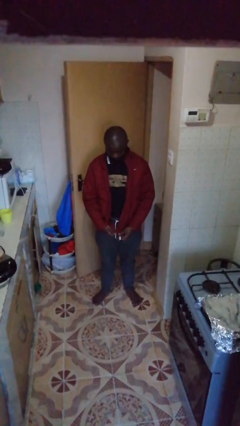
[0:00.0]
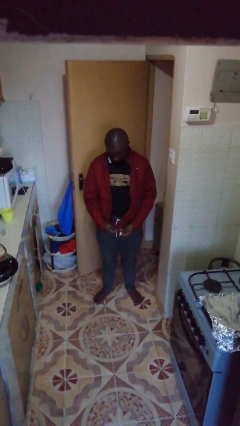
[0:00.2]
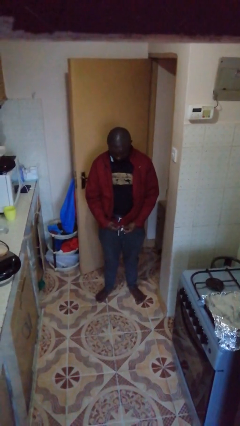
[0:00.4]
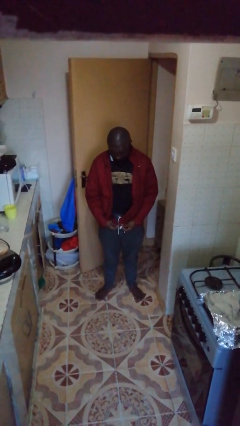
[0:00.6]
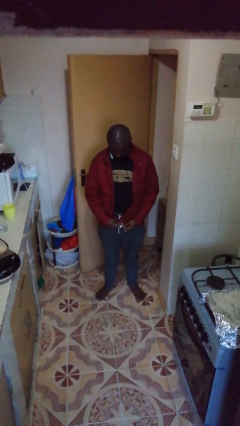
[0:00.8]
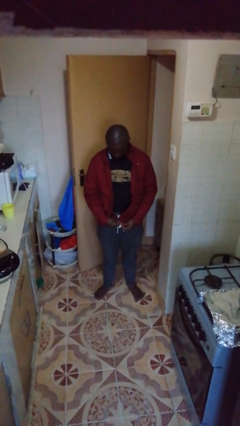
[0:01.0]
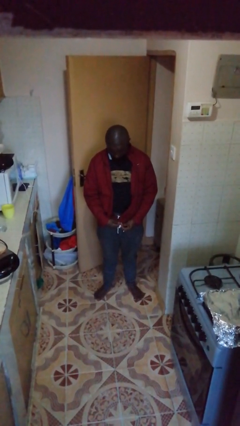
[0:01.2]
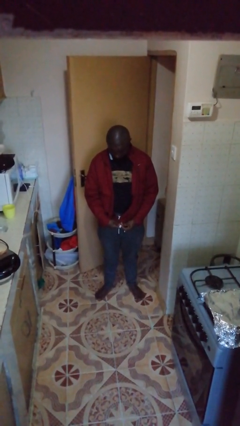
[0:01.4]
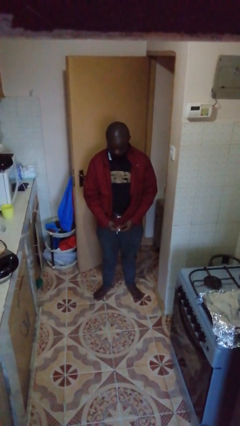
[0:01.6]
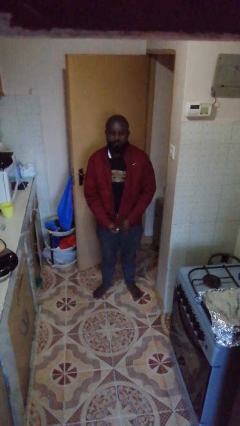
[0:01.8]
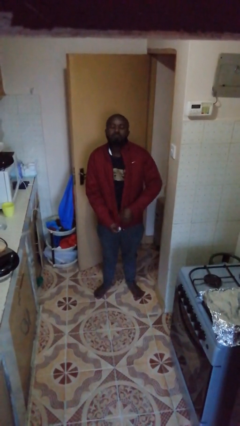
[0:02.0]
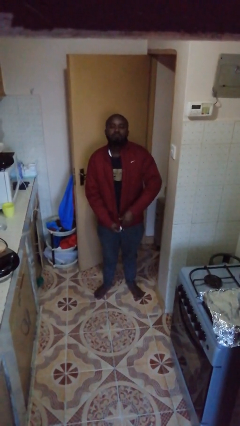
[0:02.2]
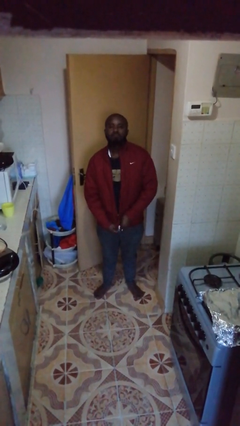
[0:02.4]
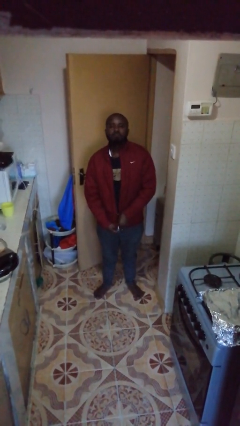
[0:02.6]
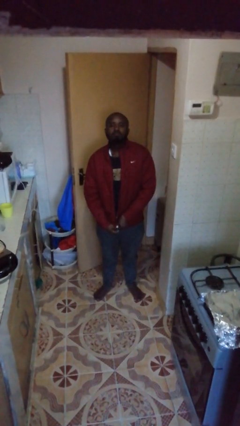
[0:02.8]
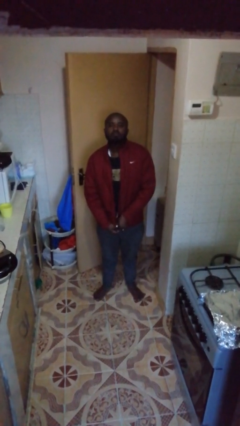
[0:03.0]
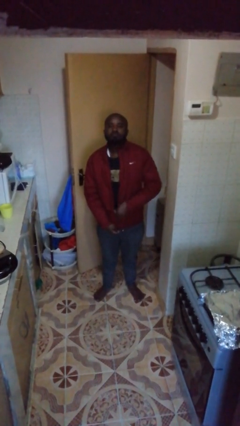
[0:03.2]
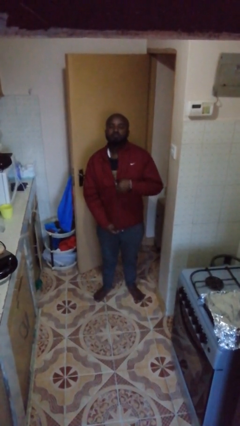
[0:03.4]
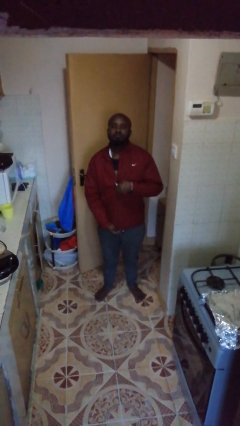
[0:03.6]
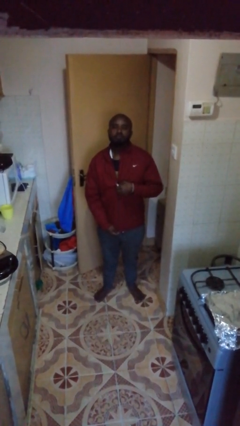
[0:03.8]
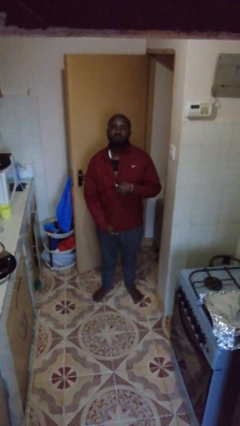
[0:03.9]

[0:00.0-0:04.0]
person zips up jacket

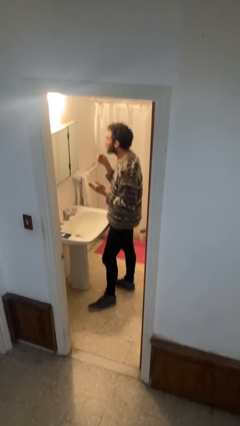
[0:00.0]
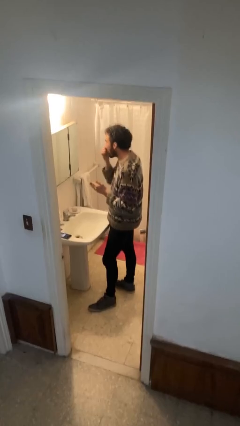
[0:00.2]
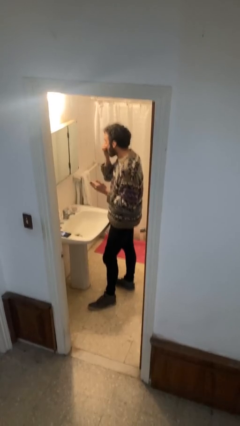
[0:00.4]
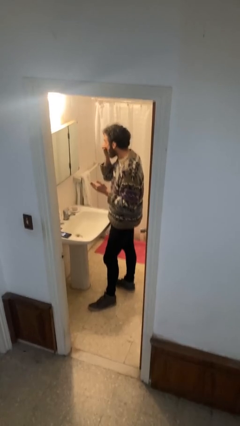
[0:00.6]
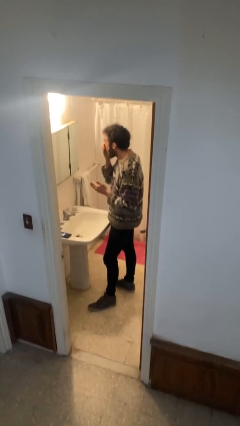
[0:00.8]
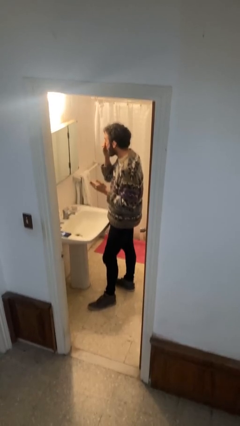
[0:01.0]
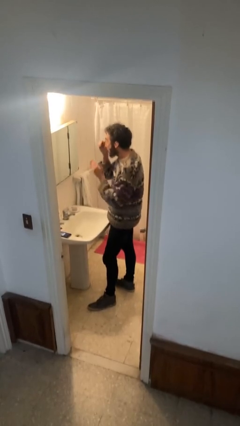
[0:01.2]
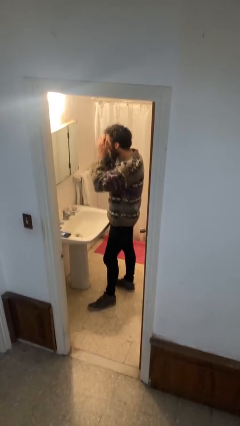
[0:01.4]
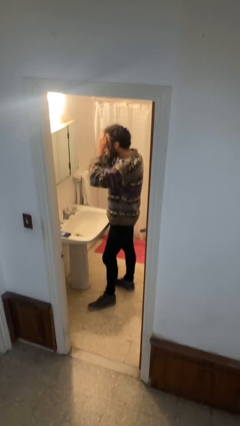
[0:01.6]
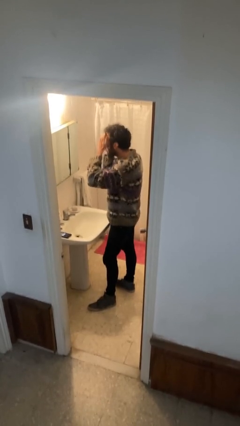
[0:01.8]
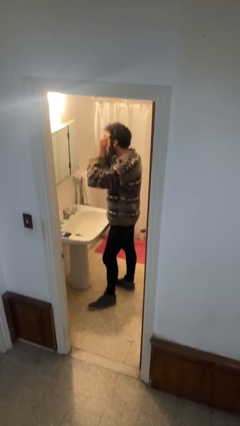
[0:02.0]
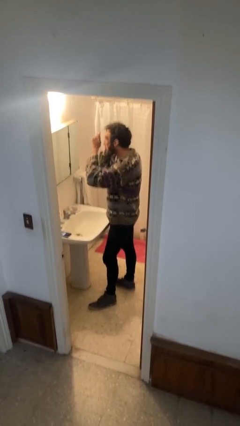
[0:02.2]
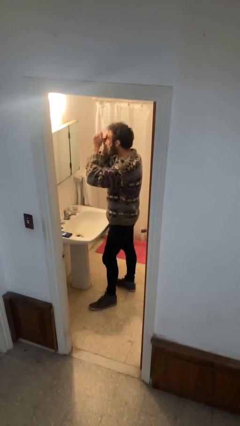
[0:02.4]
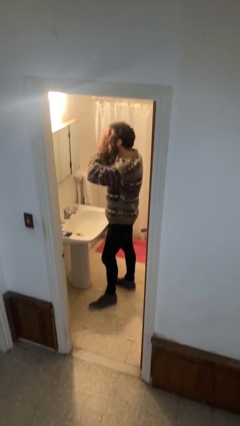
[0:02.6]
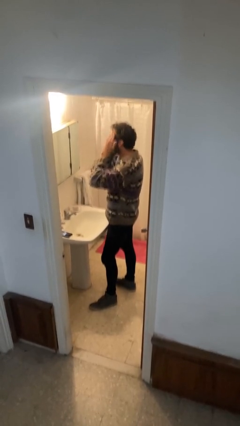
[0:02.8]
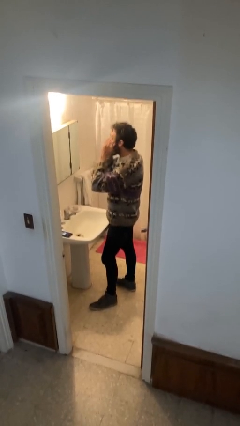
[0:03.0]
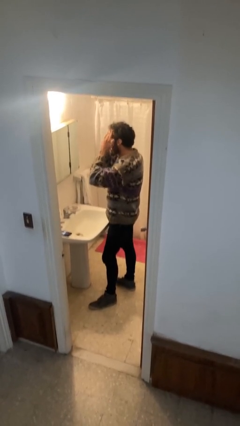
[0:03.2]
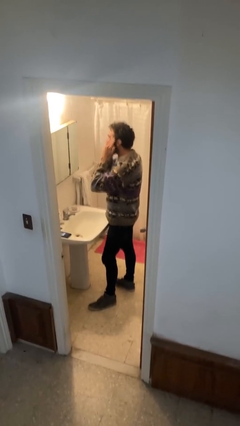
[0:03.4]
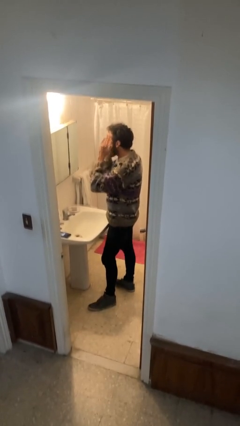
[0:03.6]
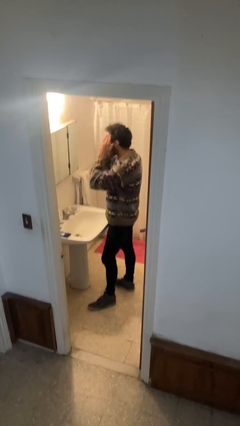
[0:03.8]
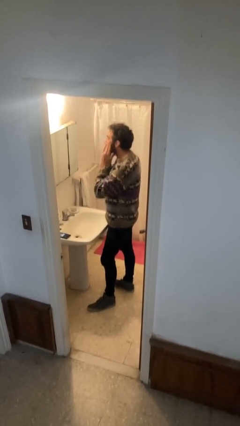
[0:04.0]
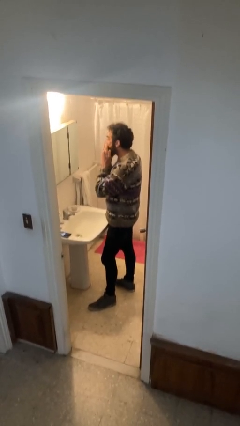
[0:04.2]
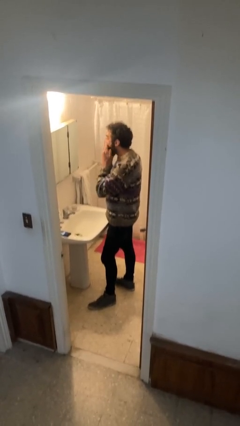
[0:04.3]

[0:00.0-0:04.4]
person applies foundation makeup

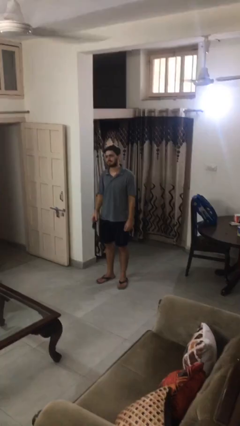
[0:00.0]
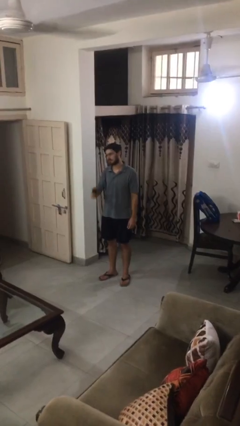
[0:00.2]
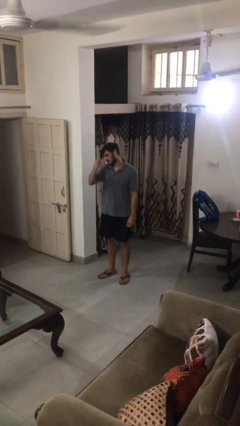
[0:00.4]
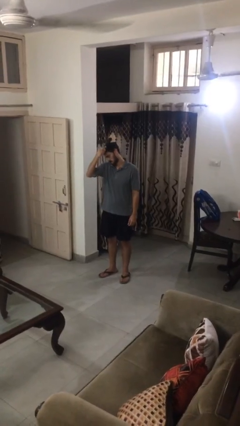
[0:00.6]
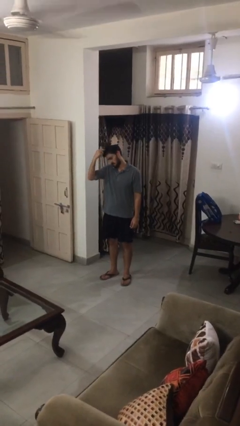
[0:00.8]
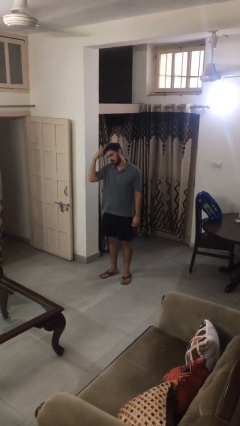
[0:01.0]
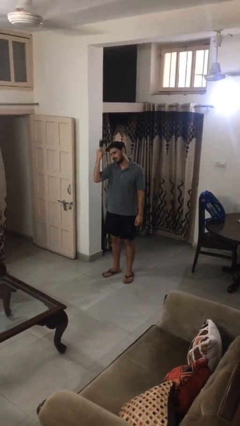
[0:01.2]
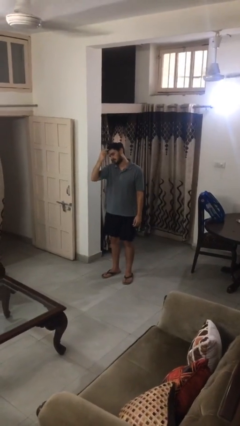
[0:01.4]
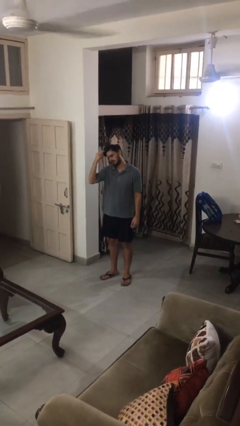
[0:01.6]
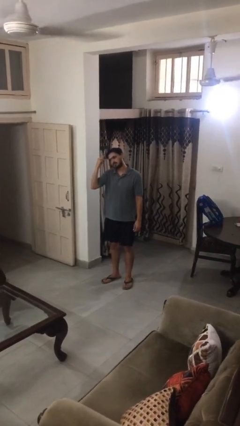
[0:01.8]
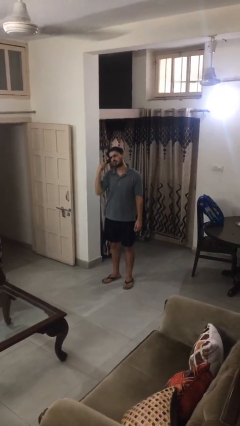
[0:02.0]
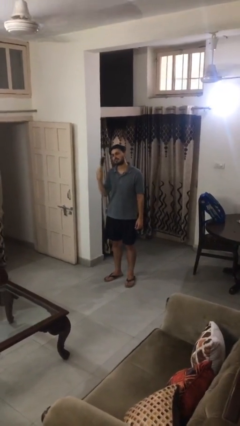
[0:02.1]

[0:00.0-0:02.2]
person brushes hair

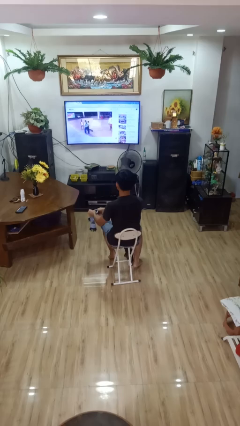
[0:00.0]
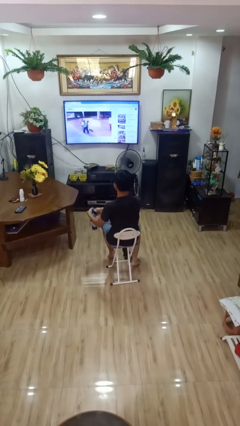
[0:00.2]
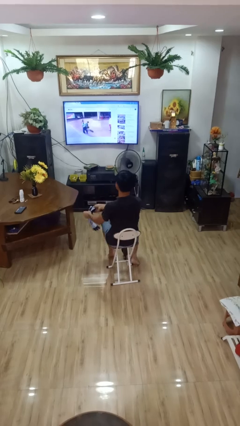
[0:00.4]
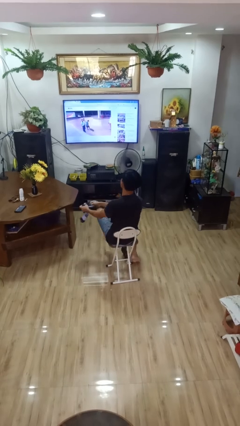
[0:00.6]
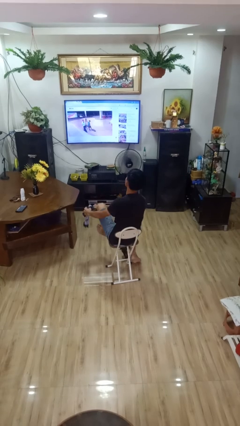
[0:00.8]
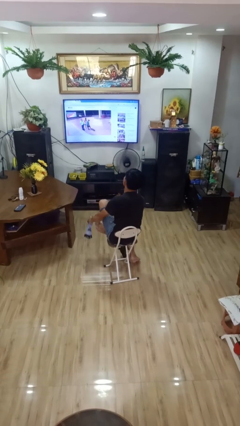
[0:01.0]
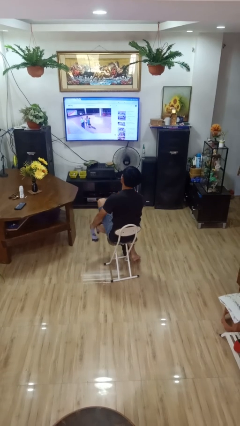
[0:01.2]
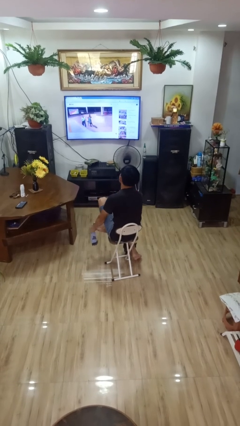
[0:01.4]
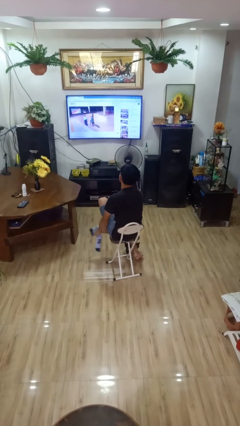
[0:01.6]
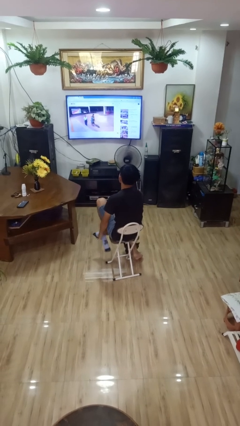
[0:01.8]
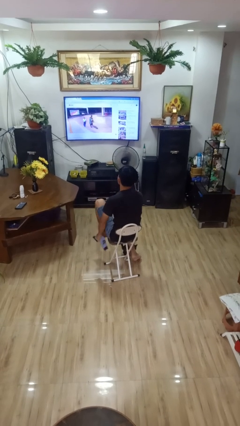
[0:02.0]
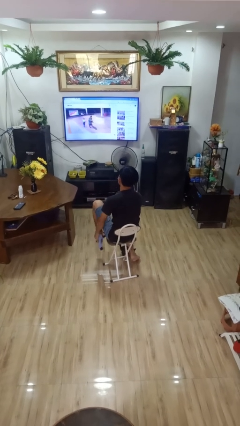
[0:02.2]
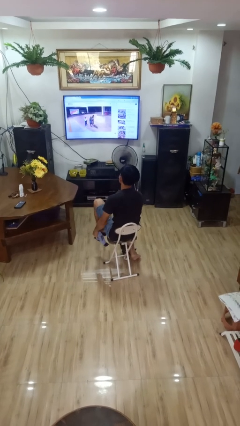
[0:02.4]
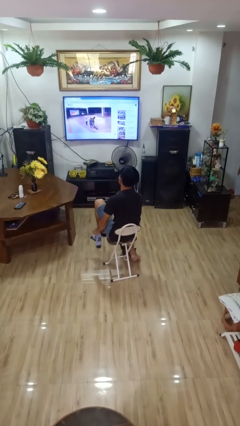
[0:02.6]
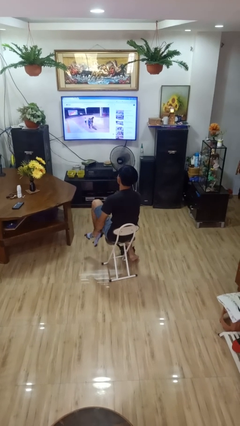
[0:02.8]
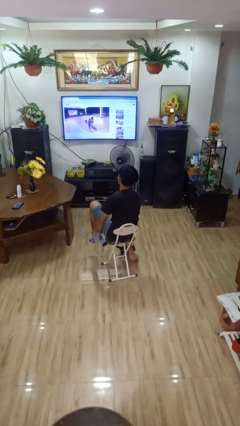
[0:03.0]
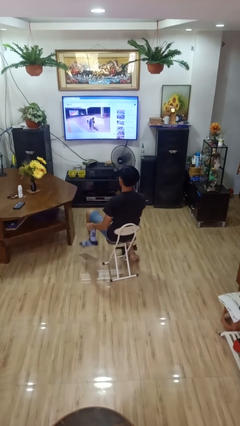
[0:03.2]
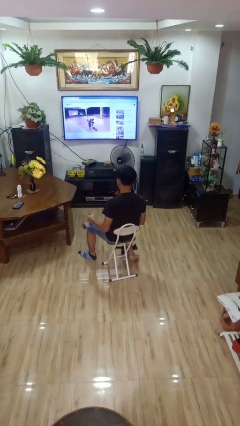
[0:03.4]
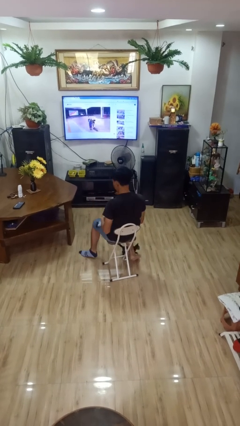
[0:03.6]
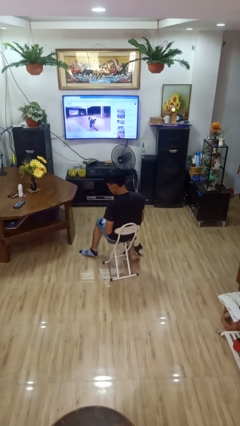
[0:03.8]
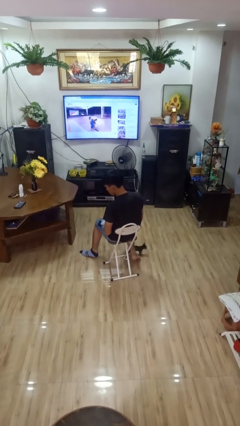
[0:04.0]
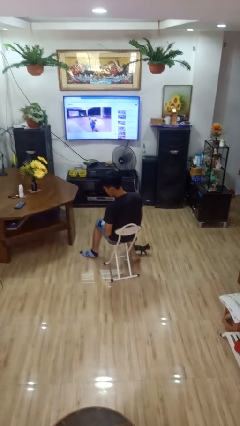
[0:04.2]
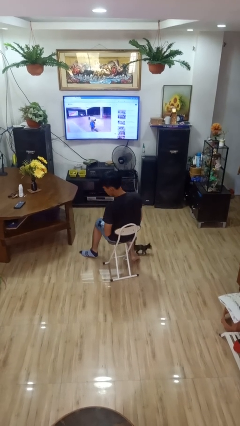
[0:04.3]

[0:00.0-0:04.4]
person puts on socks

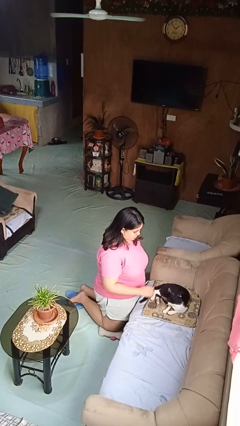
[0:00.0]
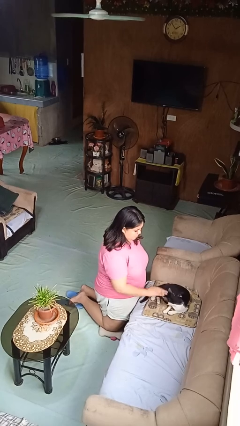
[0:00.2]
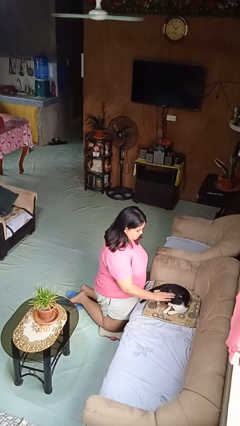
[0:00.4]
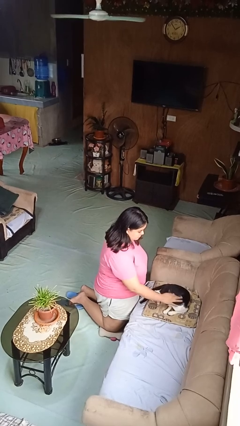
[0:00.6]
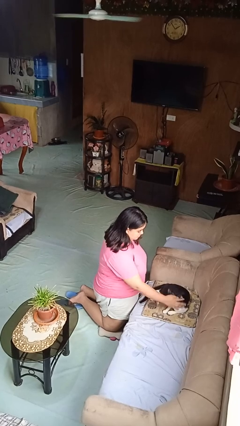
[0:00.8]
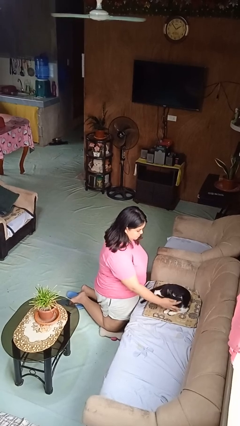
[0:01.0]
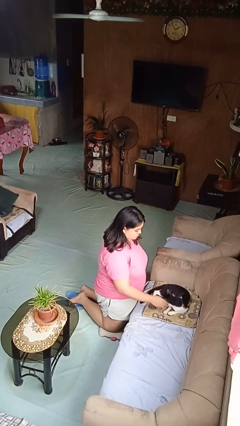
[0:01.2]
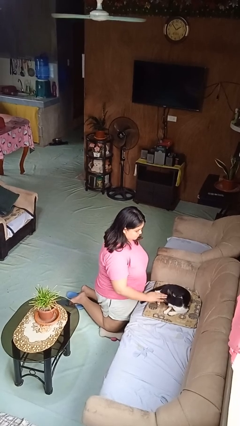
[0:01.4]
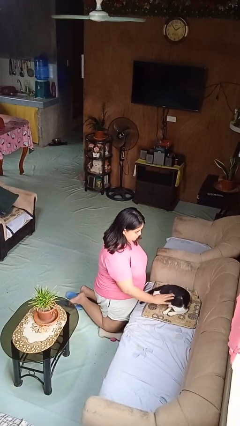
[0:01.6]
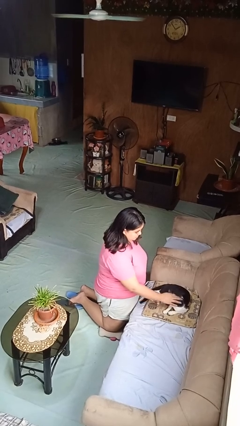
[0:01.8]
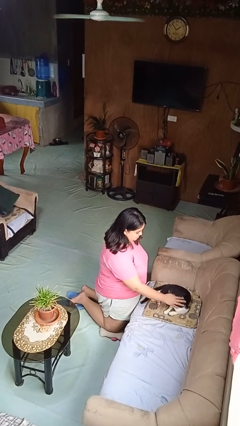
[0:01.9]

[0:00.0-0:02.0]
person pets cat

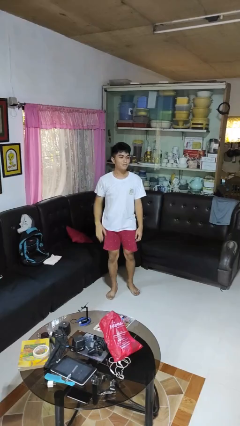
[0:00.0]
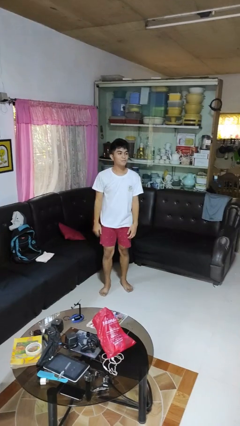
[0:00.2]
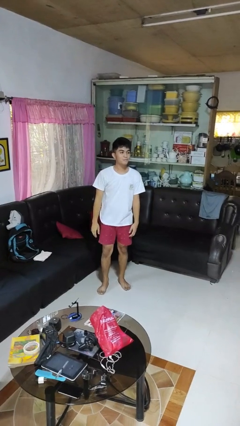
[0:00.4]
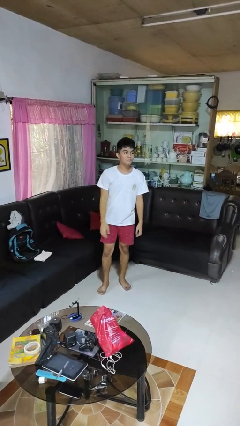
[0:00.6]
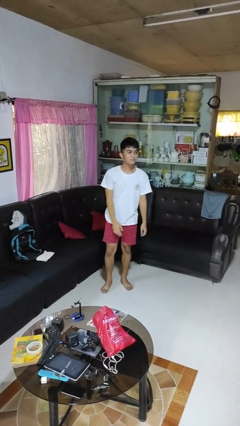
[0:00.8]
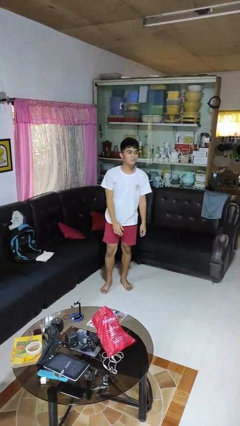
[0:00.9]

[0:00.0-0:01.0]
person gestures lower hand
